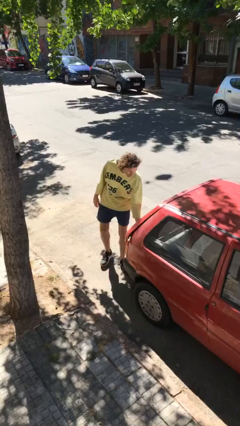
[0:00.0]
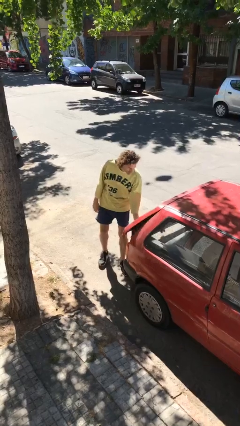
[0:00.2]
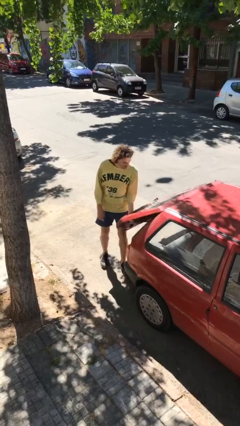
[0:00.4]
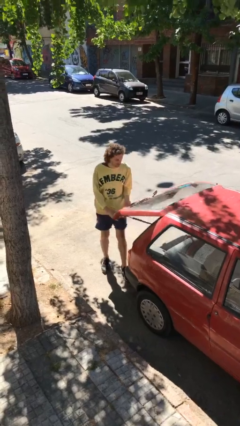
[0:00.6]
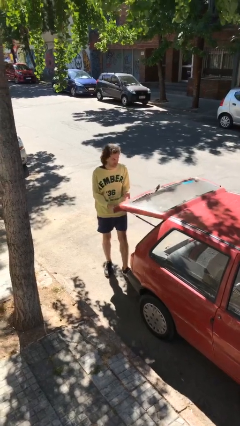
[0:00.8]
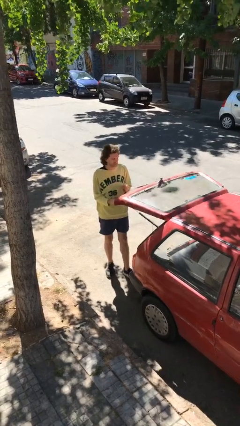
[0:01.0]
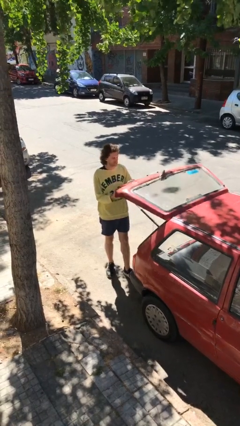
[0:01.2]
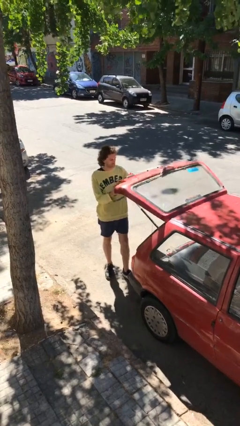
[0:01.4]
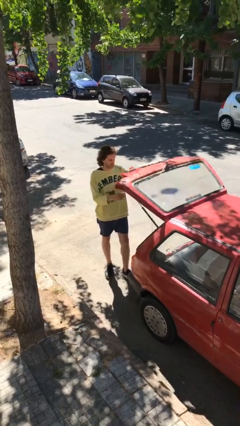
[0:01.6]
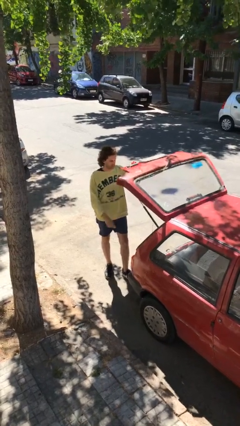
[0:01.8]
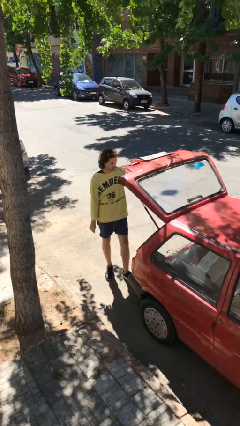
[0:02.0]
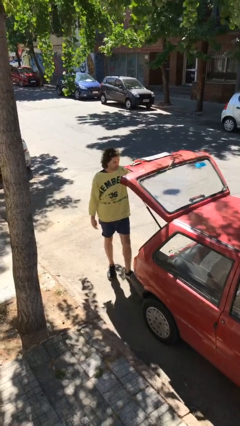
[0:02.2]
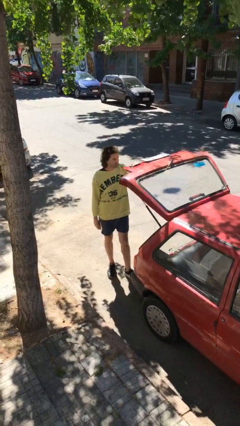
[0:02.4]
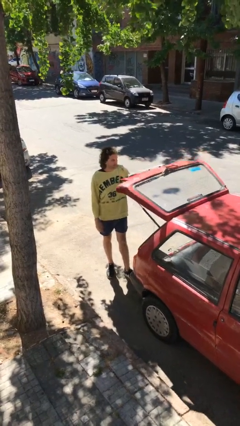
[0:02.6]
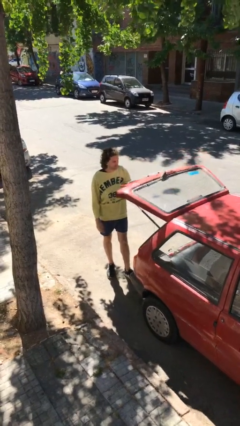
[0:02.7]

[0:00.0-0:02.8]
person opens car trunk

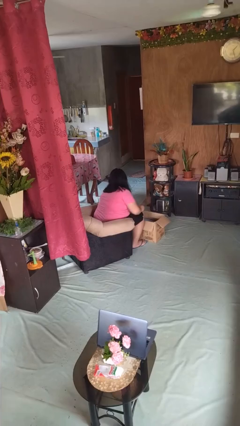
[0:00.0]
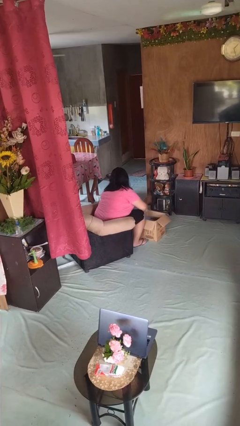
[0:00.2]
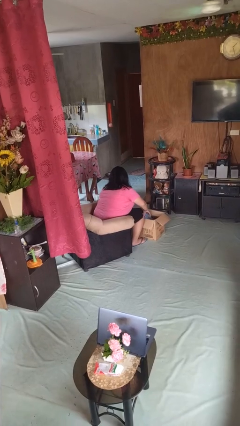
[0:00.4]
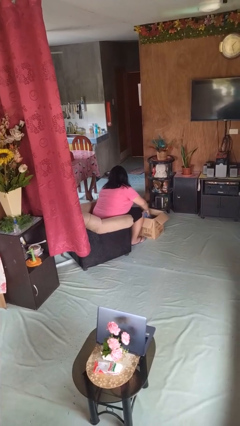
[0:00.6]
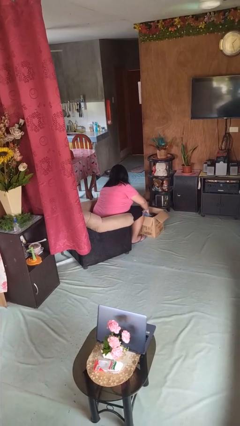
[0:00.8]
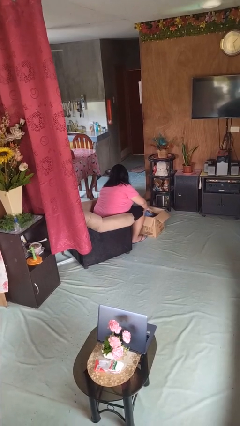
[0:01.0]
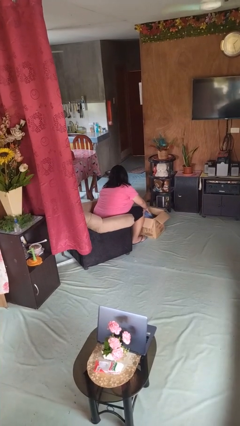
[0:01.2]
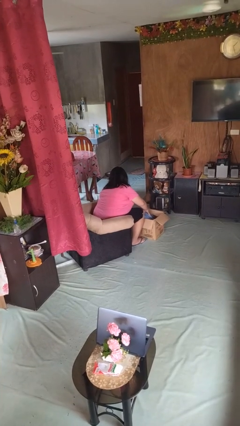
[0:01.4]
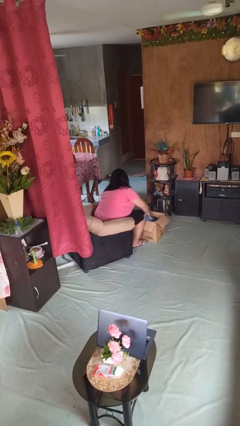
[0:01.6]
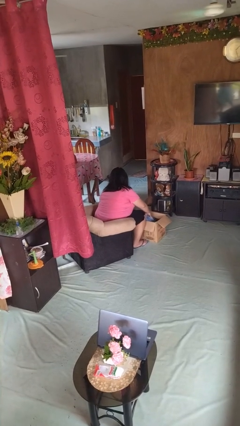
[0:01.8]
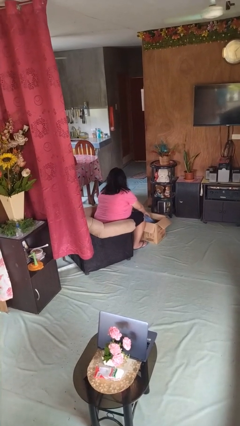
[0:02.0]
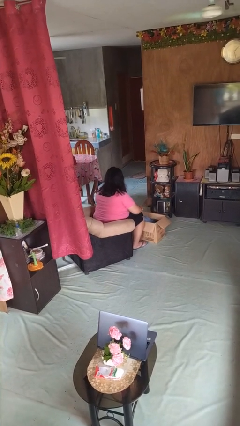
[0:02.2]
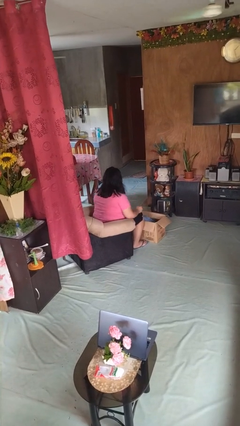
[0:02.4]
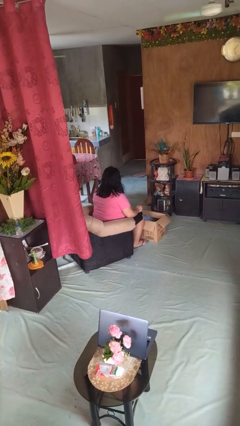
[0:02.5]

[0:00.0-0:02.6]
person searches in box

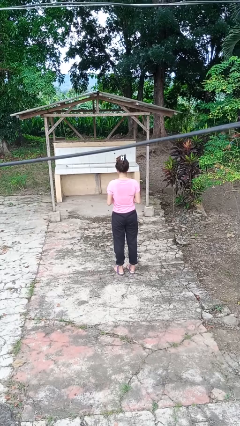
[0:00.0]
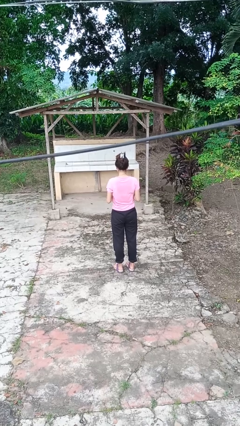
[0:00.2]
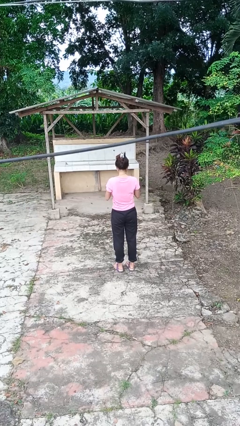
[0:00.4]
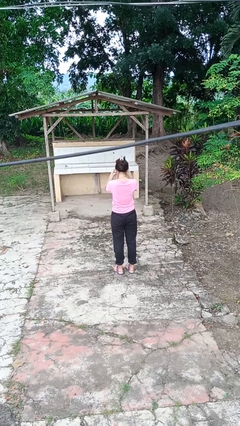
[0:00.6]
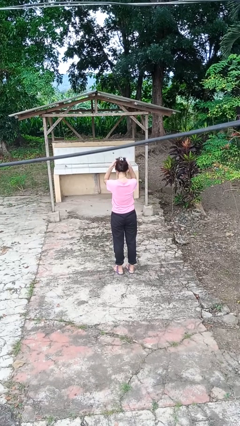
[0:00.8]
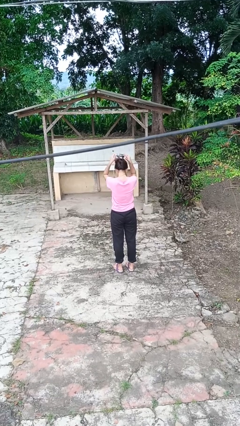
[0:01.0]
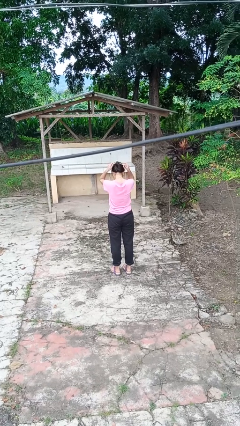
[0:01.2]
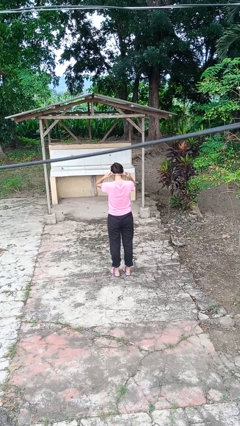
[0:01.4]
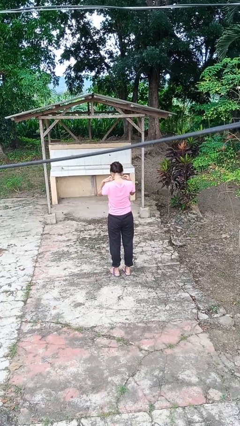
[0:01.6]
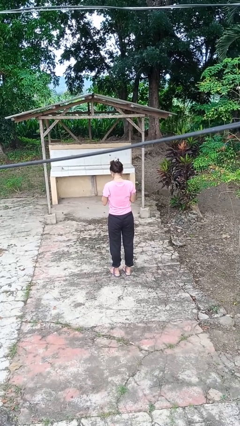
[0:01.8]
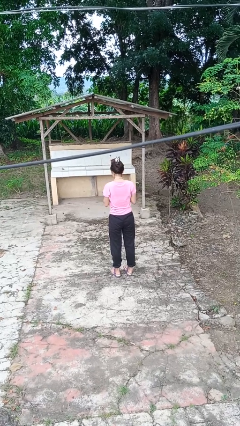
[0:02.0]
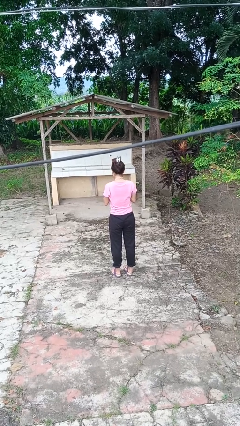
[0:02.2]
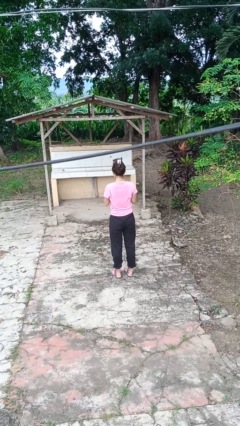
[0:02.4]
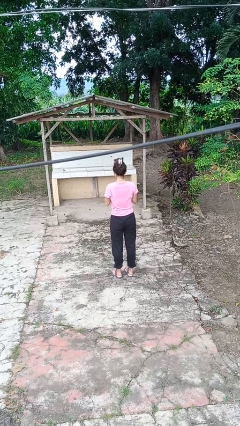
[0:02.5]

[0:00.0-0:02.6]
person puts on necklace

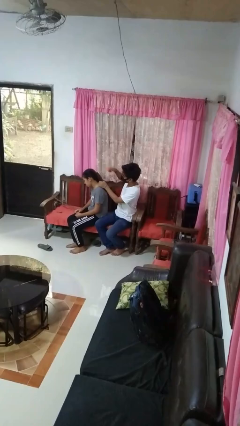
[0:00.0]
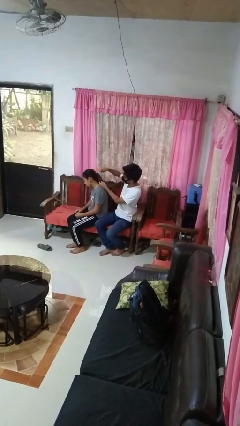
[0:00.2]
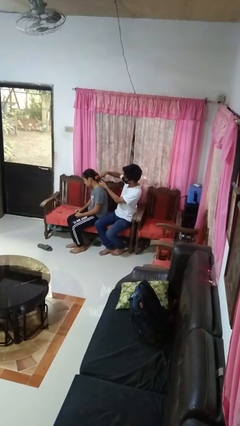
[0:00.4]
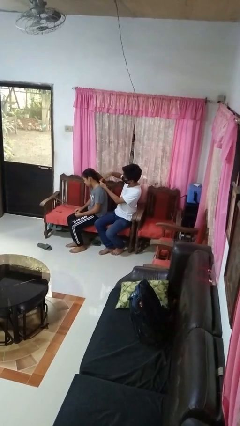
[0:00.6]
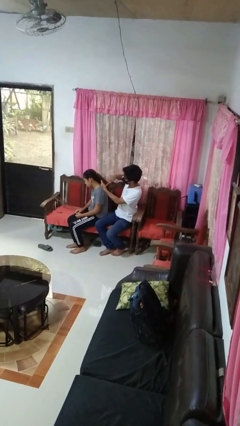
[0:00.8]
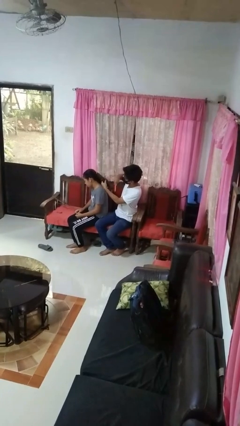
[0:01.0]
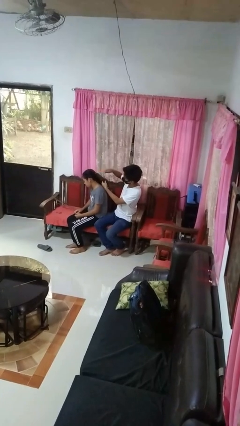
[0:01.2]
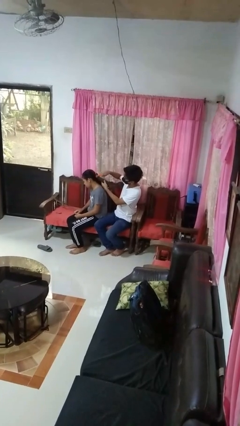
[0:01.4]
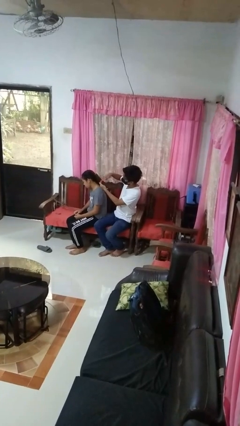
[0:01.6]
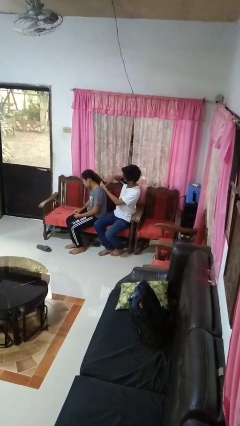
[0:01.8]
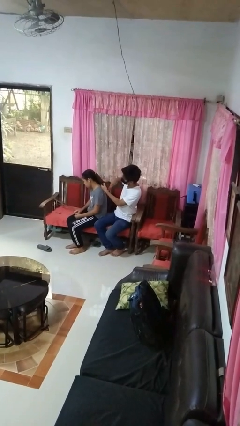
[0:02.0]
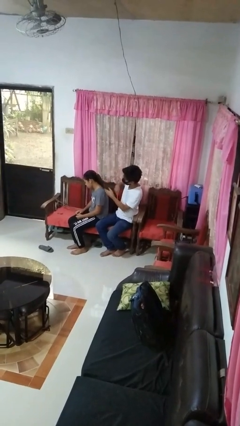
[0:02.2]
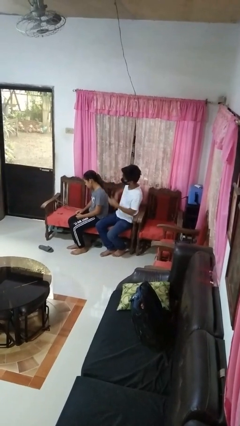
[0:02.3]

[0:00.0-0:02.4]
person brushes hair of person

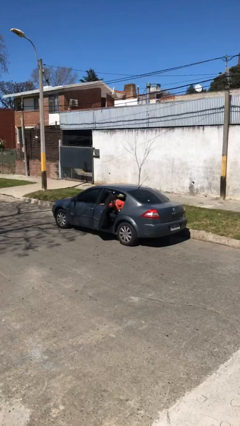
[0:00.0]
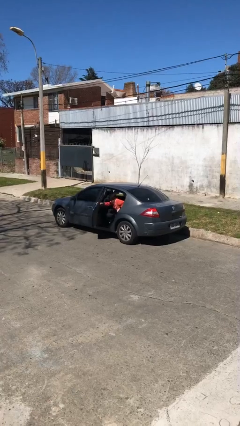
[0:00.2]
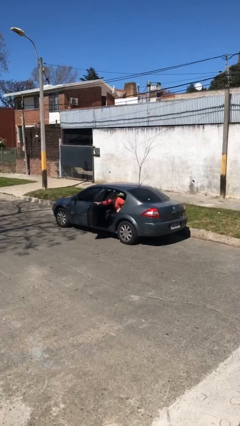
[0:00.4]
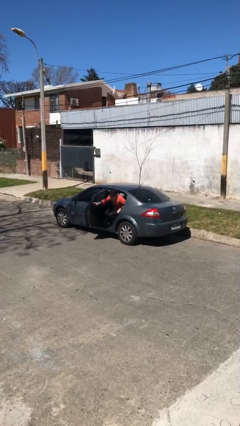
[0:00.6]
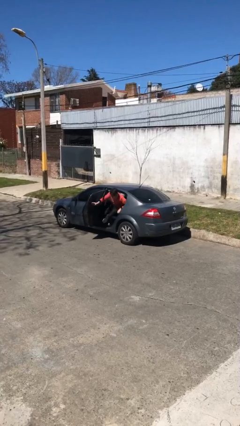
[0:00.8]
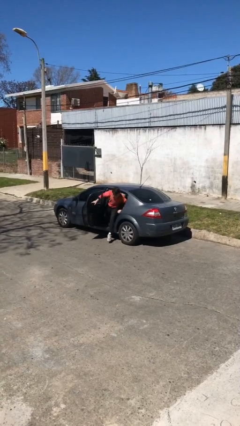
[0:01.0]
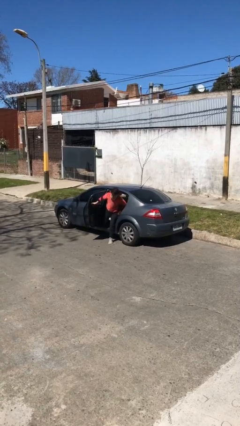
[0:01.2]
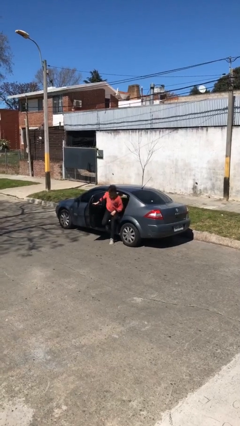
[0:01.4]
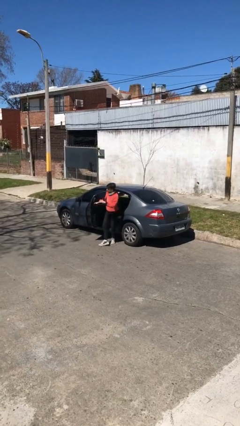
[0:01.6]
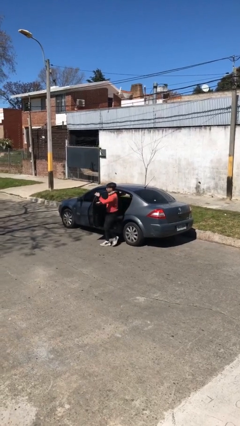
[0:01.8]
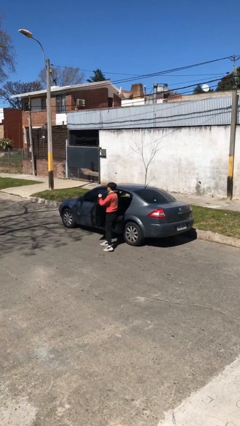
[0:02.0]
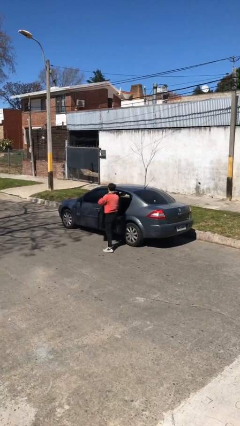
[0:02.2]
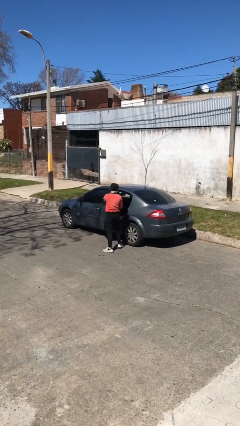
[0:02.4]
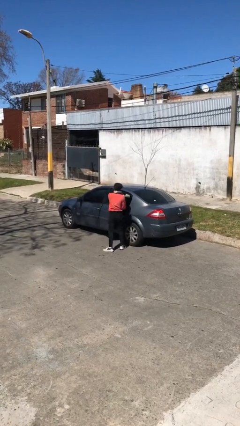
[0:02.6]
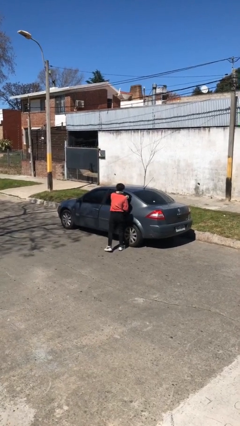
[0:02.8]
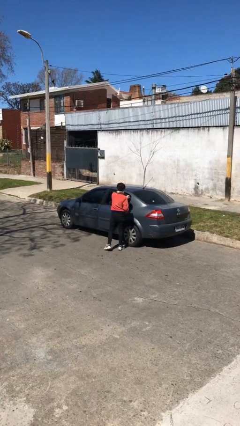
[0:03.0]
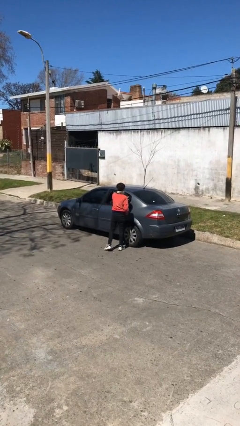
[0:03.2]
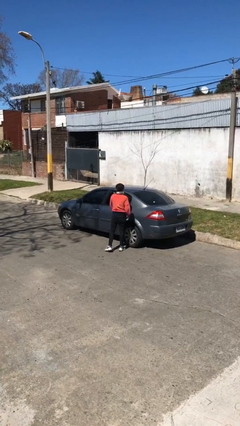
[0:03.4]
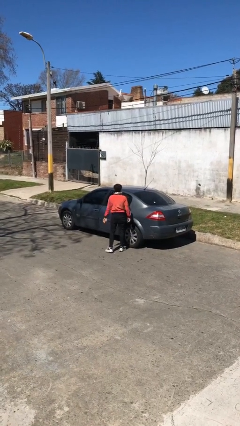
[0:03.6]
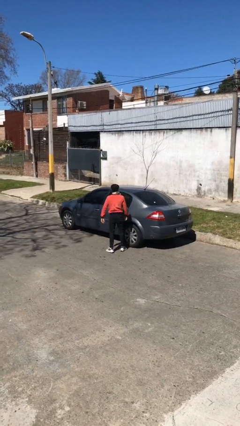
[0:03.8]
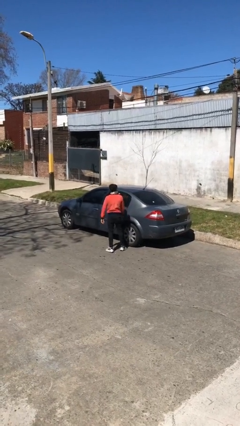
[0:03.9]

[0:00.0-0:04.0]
car drops off person

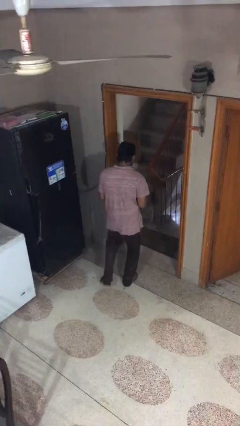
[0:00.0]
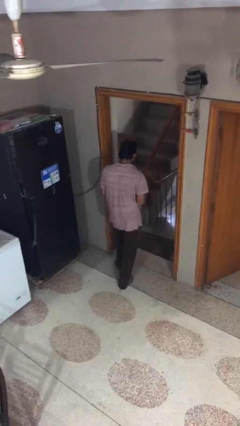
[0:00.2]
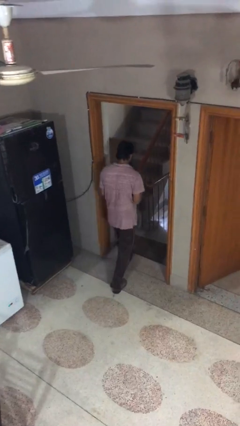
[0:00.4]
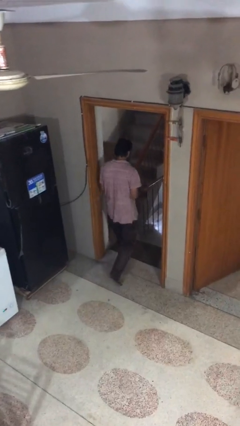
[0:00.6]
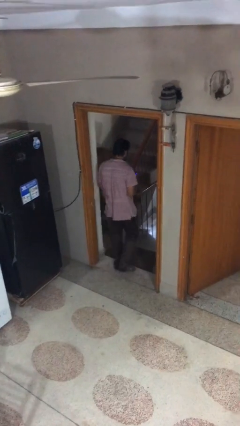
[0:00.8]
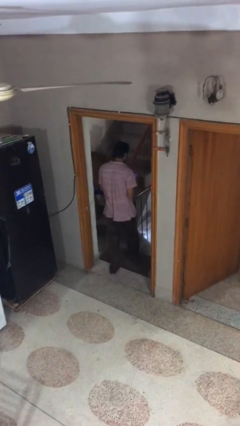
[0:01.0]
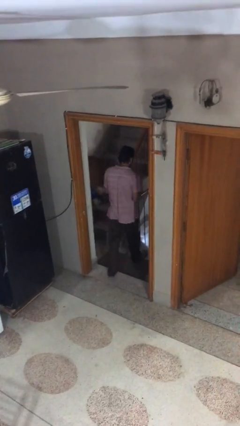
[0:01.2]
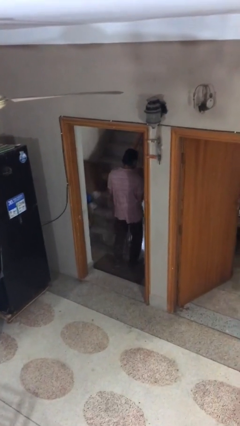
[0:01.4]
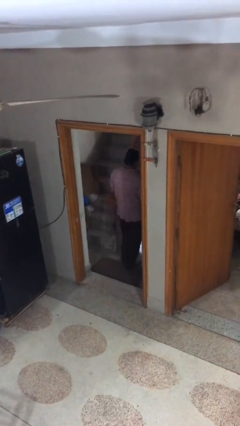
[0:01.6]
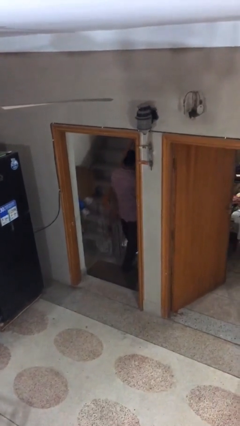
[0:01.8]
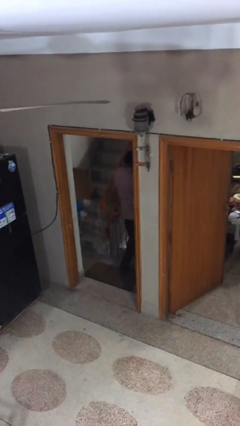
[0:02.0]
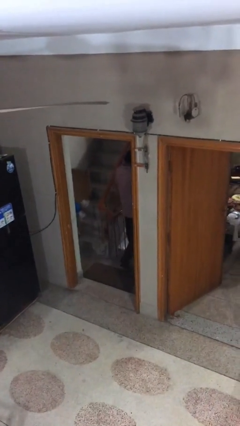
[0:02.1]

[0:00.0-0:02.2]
person exits scene through structure

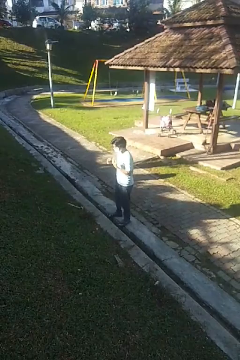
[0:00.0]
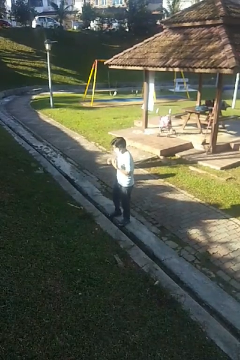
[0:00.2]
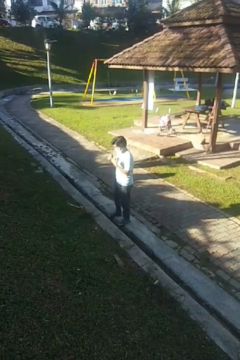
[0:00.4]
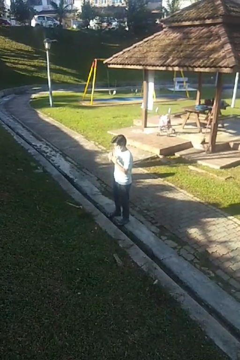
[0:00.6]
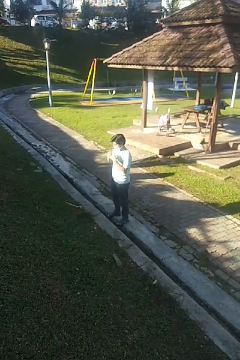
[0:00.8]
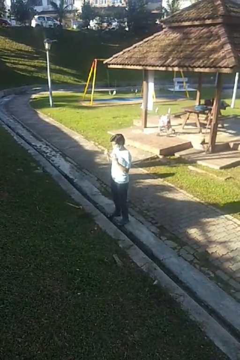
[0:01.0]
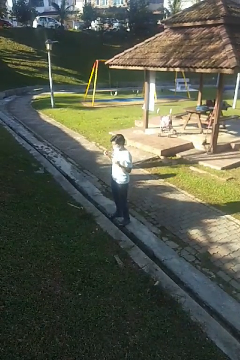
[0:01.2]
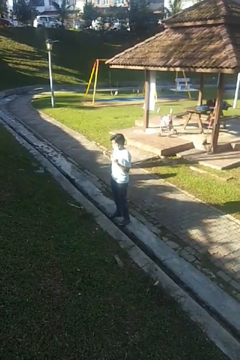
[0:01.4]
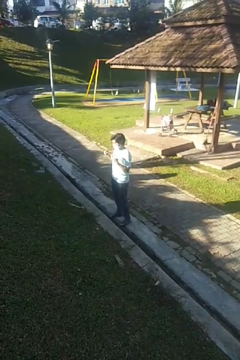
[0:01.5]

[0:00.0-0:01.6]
person takes off ring
